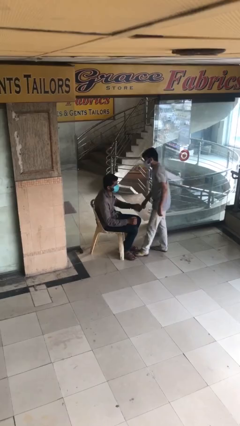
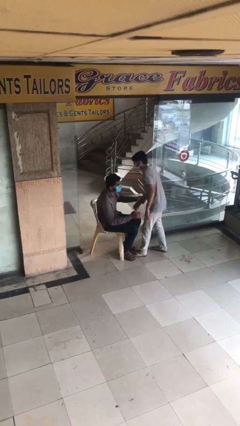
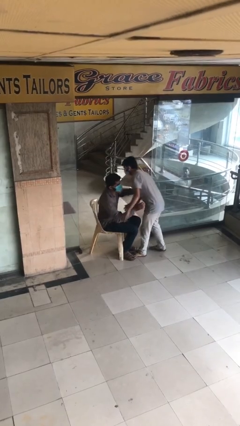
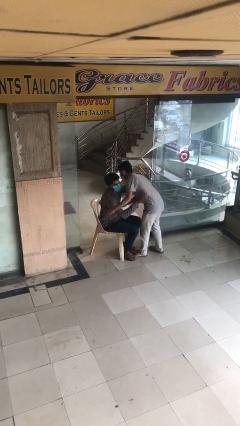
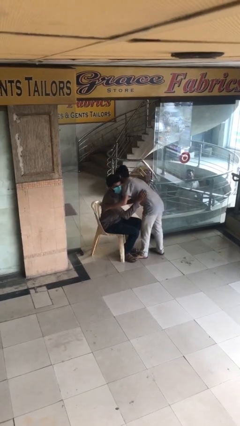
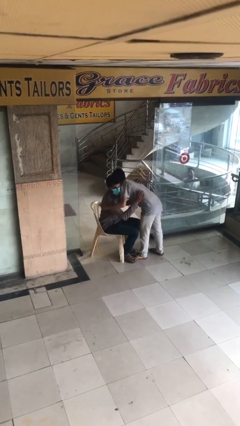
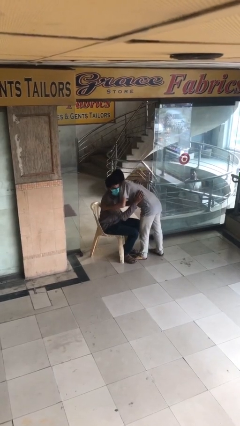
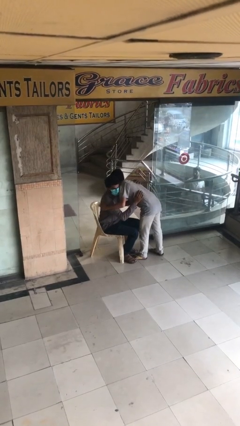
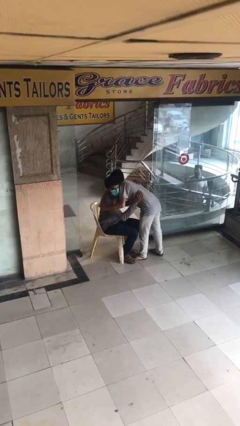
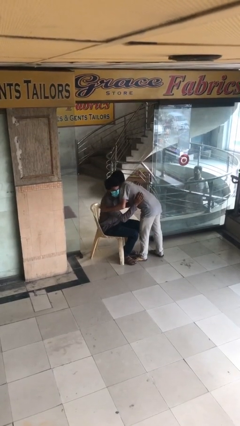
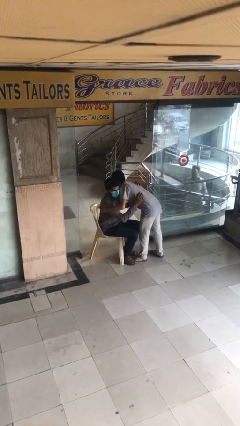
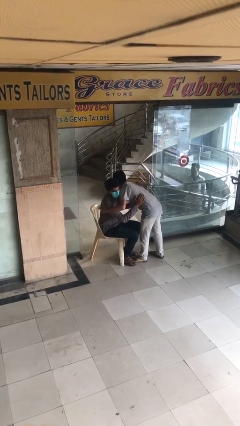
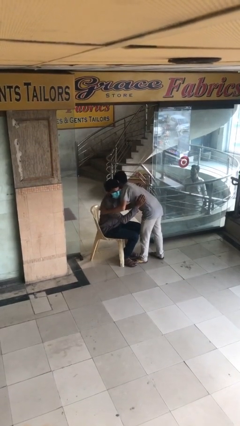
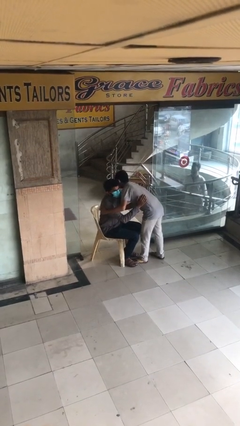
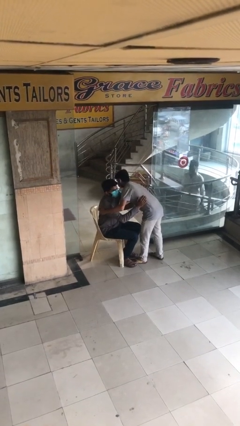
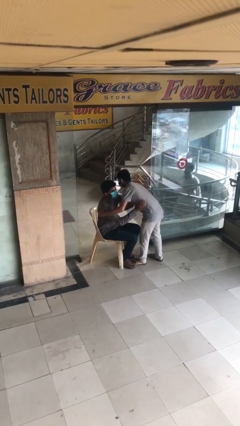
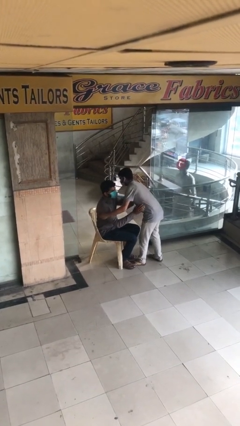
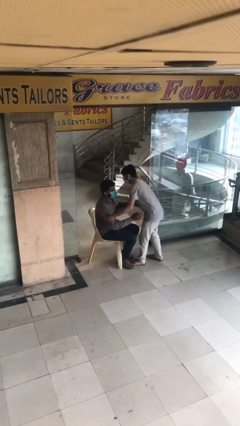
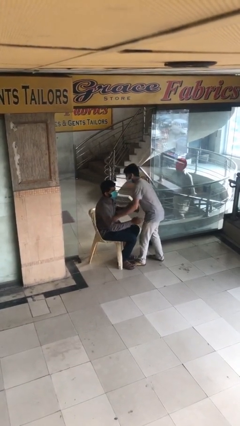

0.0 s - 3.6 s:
person embraces person

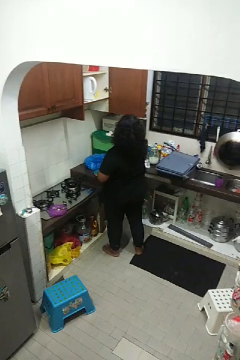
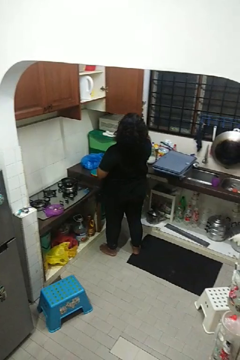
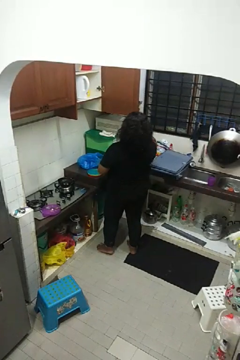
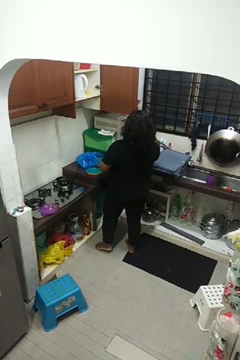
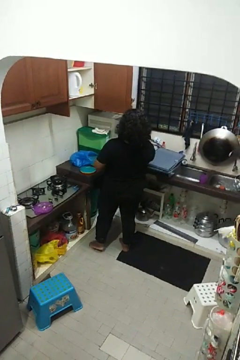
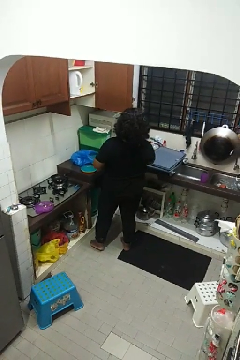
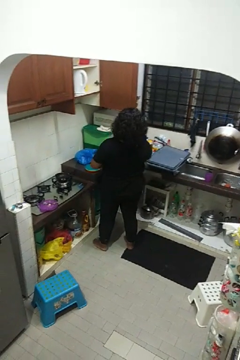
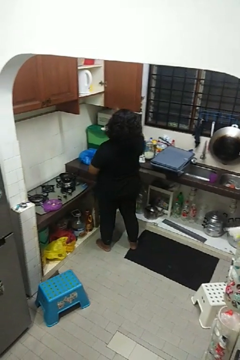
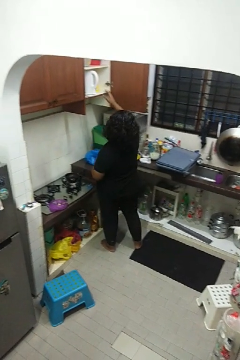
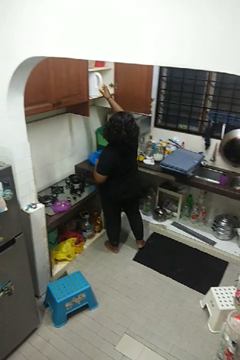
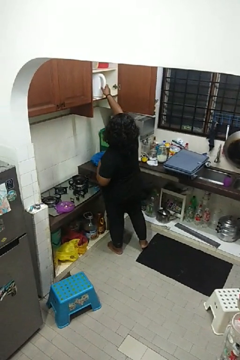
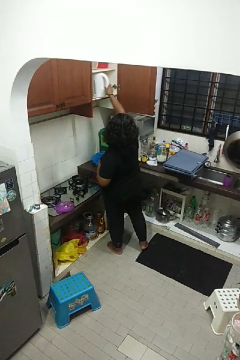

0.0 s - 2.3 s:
person takes object from cabinet

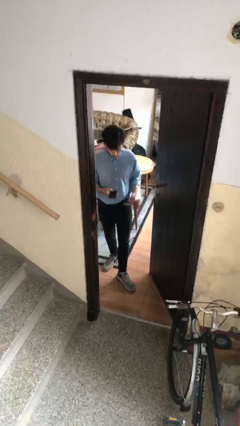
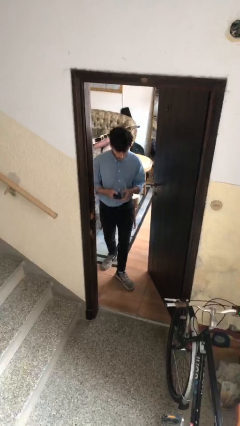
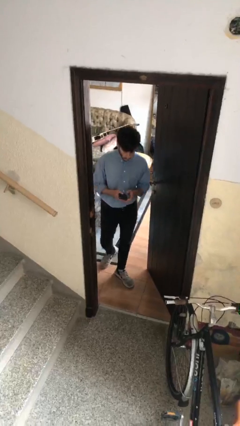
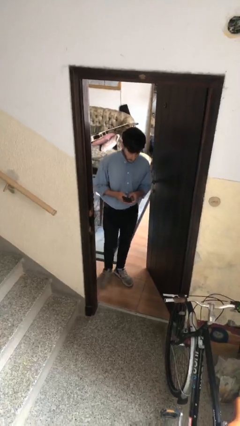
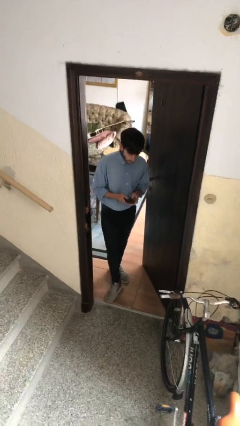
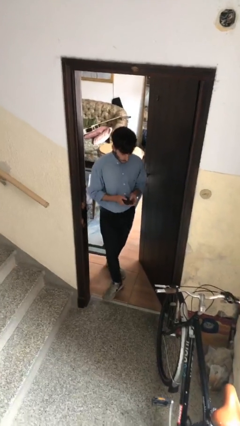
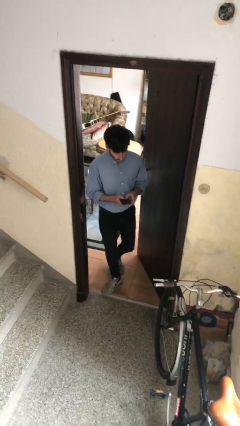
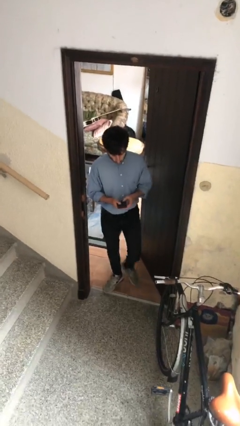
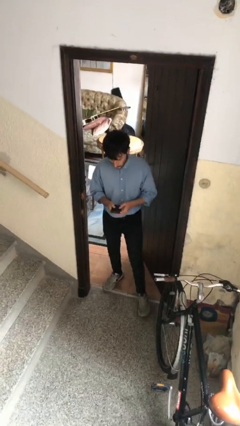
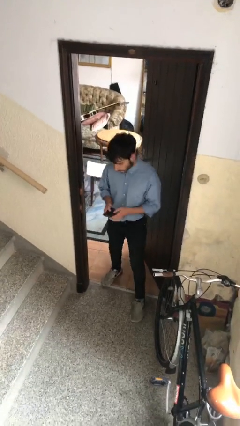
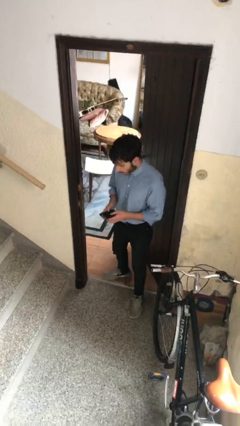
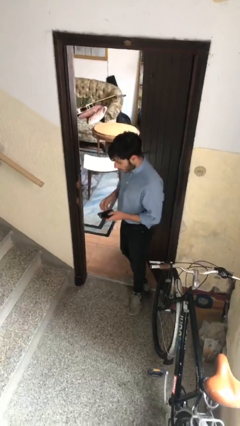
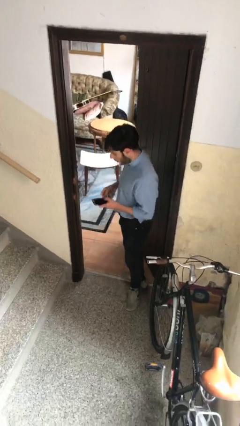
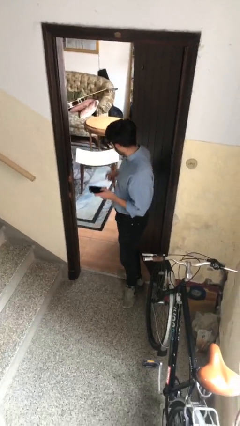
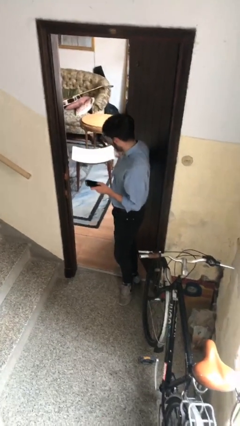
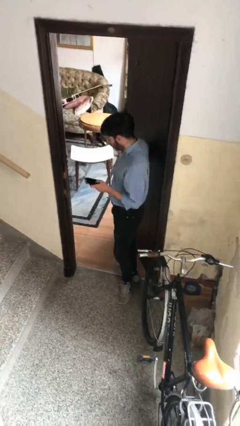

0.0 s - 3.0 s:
person enters scene through structure

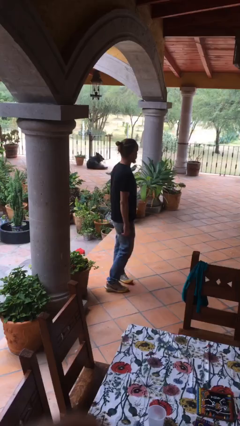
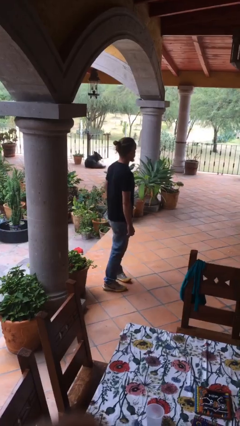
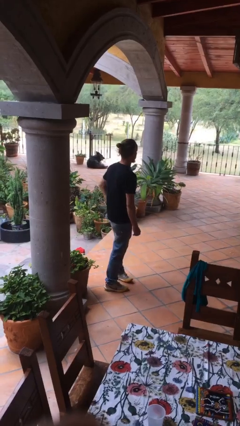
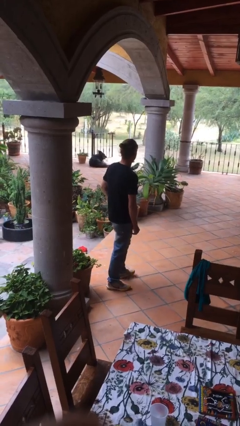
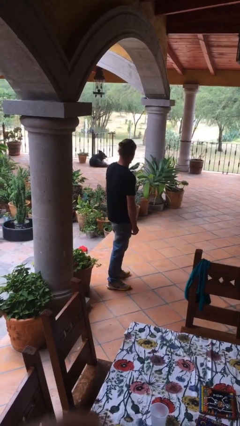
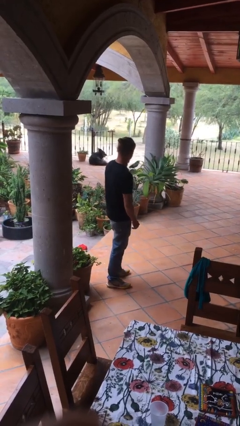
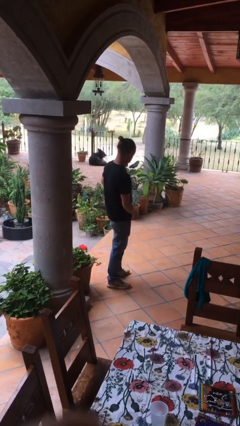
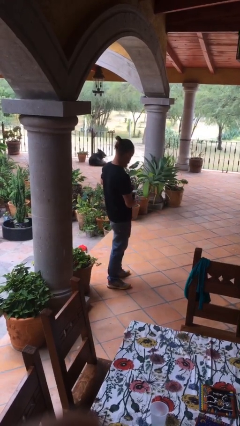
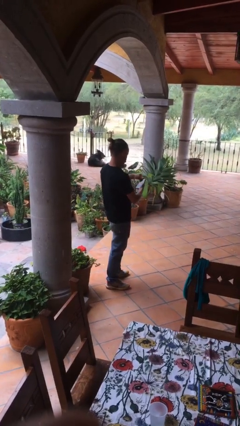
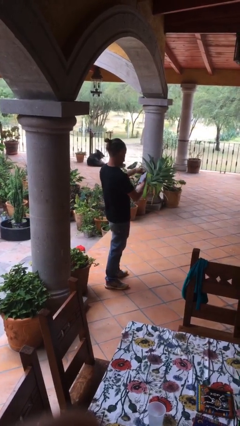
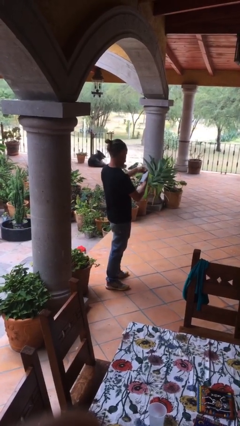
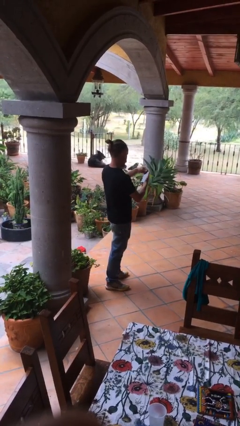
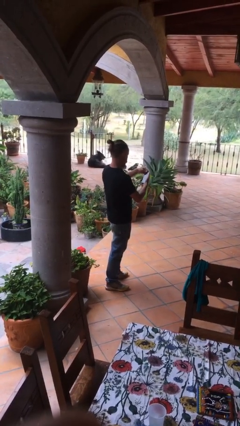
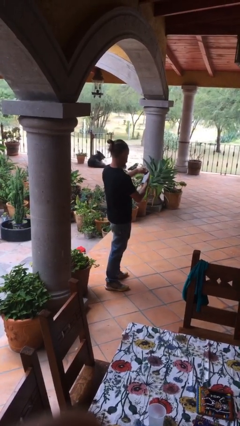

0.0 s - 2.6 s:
person takes phone from pocket

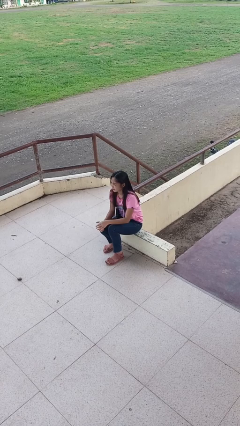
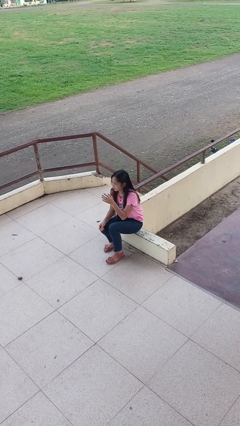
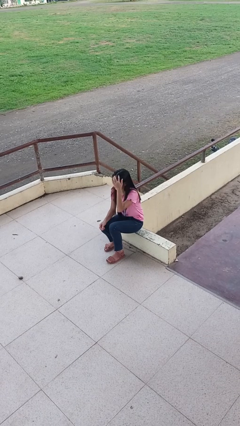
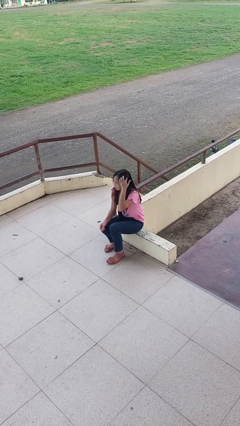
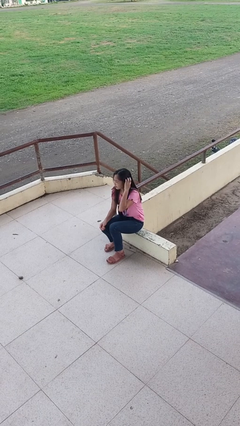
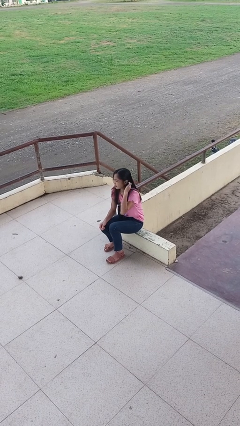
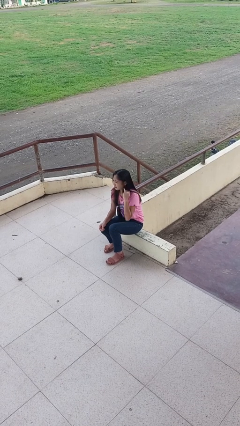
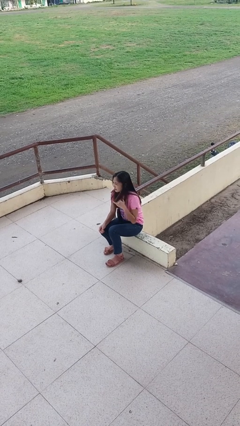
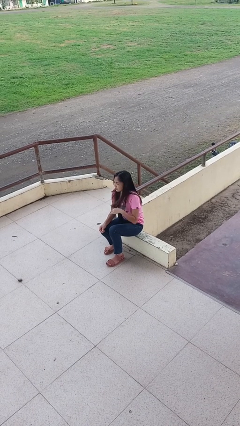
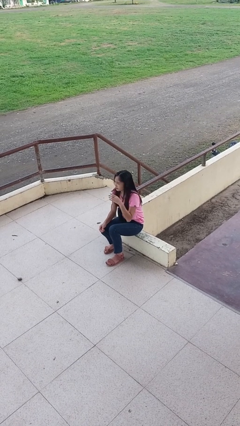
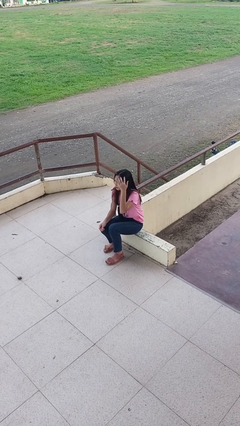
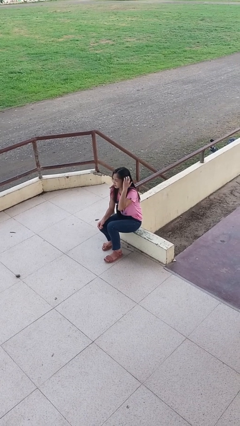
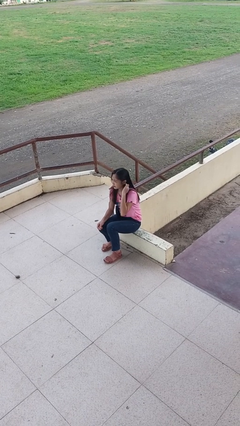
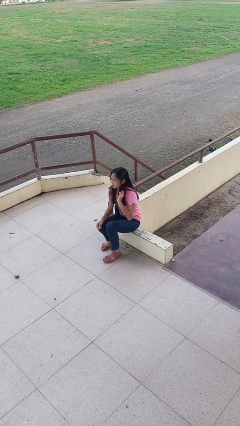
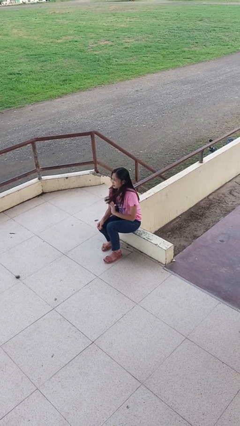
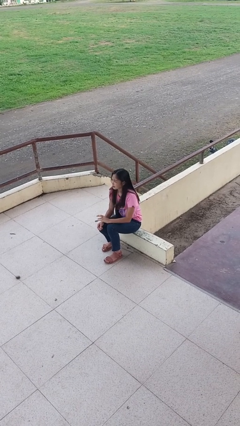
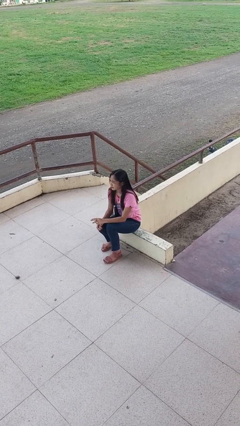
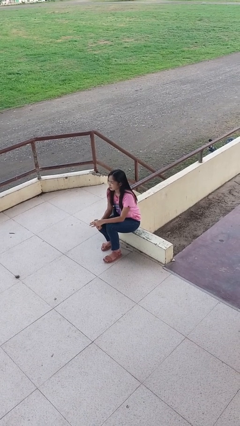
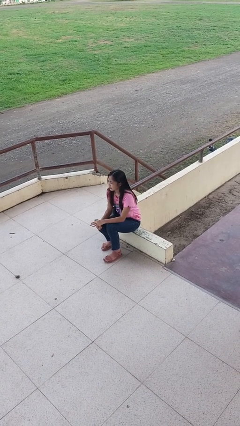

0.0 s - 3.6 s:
person strokes hair

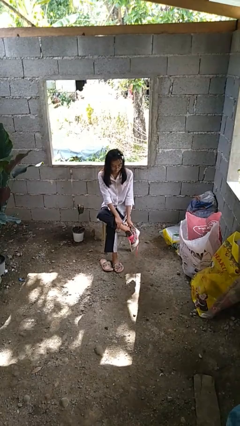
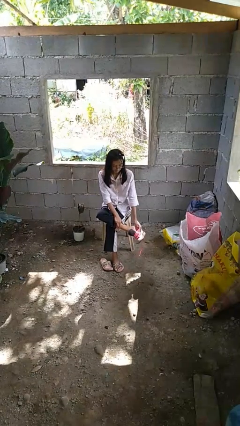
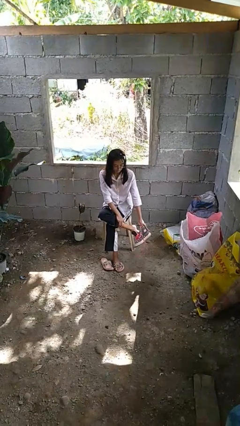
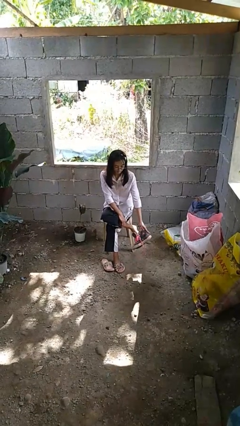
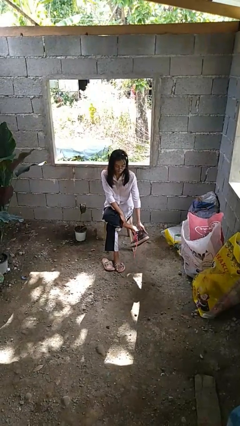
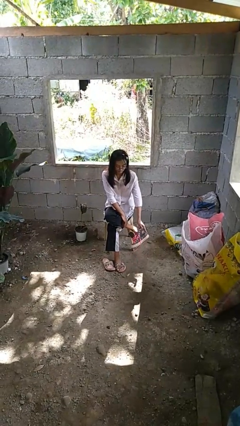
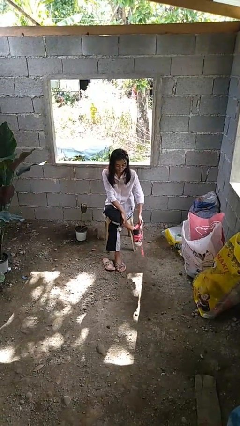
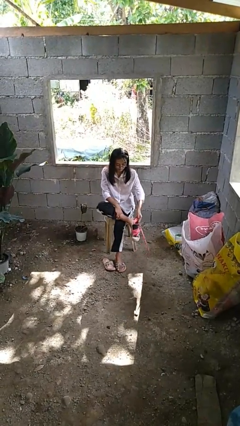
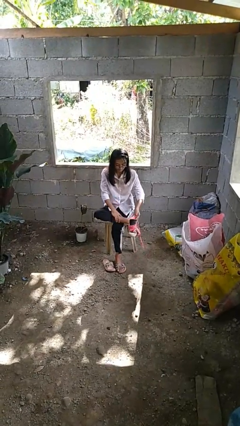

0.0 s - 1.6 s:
person takes off shoes

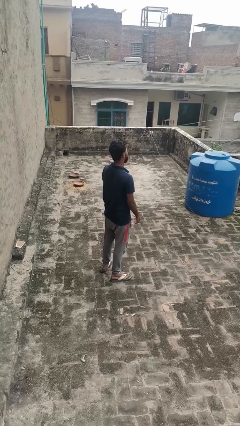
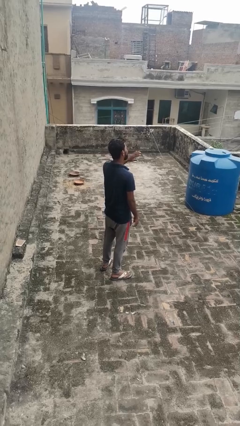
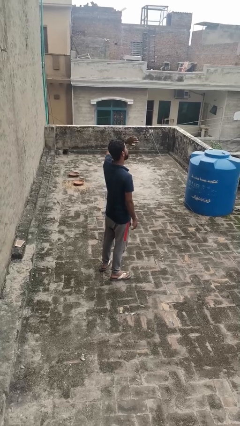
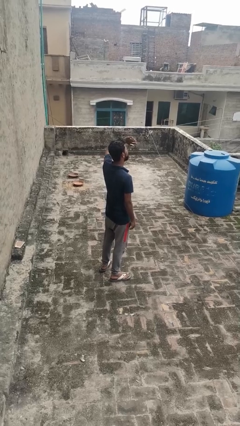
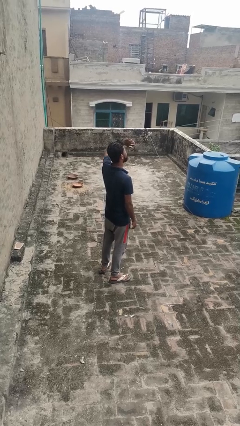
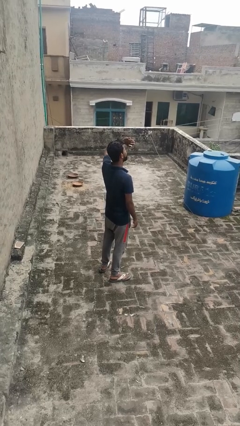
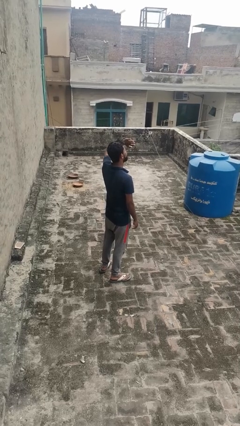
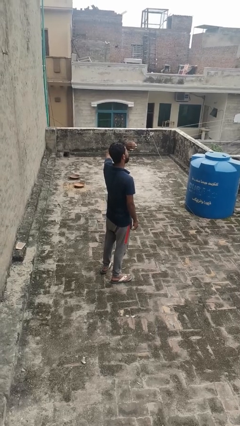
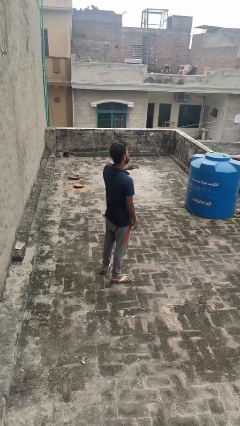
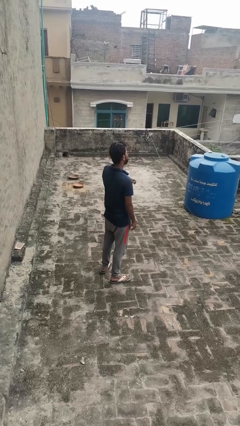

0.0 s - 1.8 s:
person shades eyes
